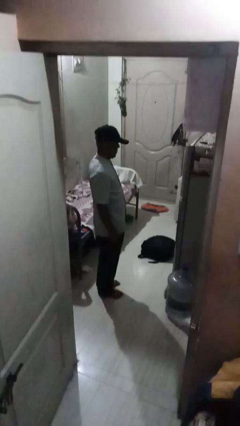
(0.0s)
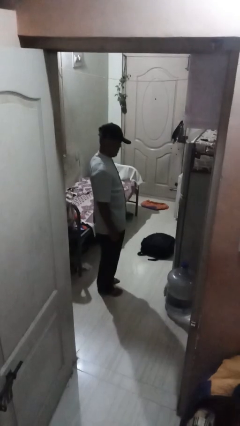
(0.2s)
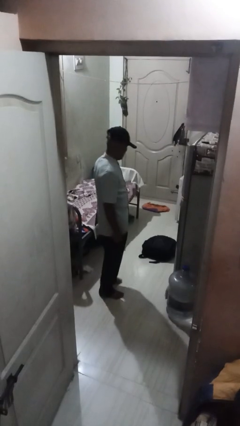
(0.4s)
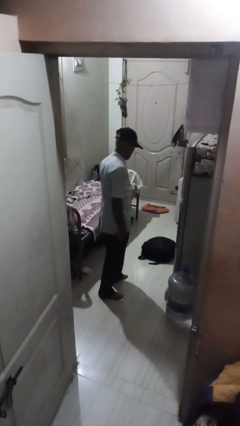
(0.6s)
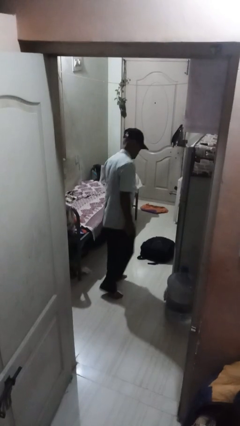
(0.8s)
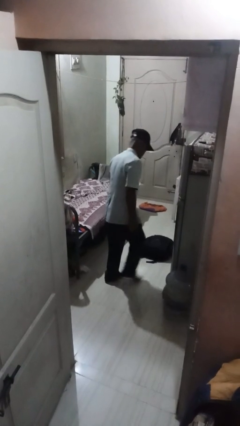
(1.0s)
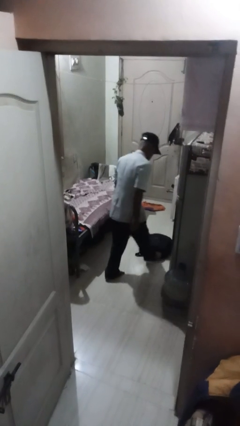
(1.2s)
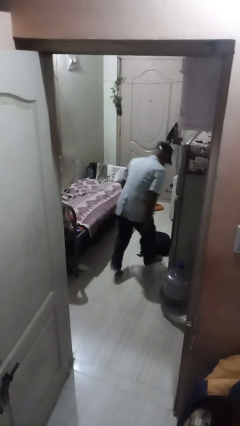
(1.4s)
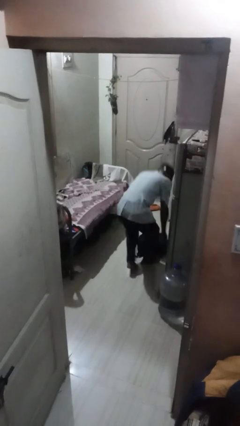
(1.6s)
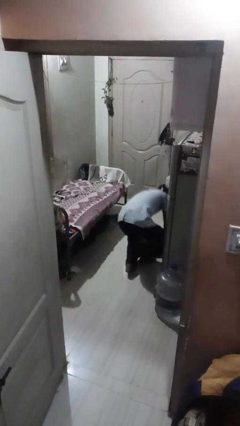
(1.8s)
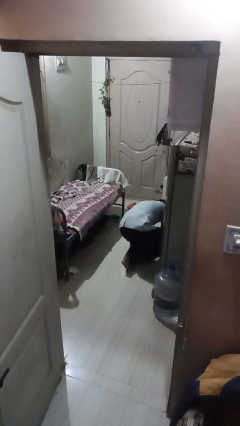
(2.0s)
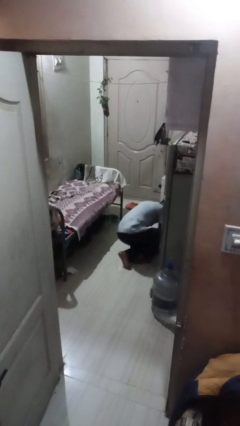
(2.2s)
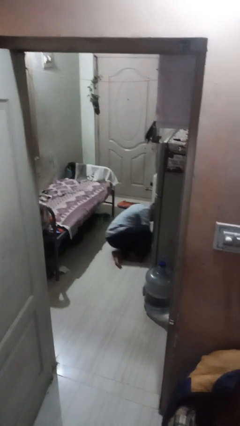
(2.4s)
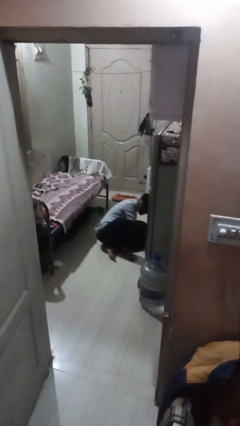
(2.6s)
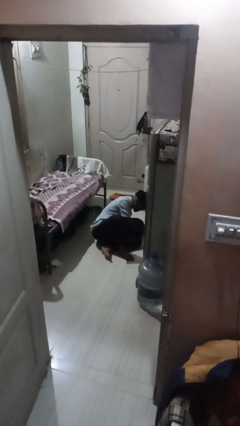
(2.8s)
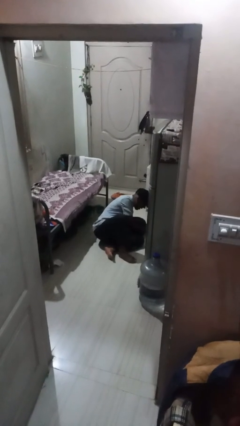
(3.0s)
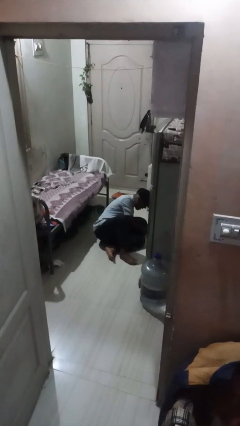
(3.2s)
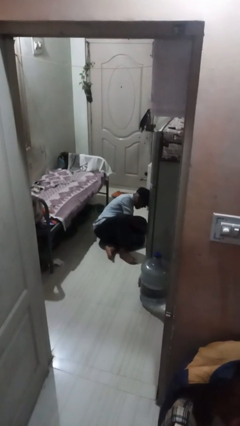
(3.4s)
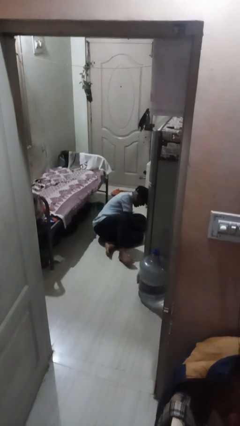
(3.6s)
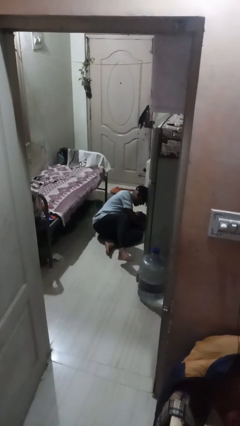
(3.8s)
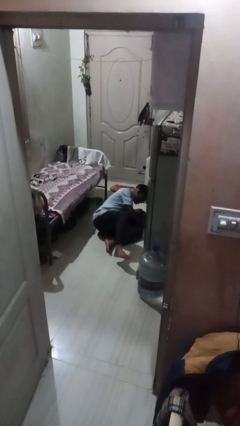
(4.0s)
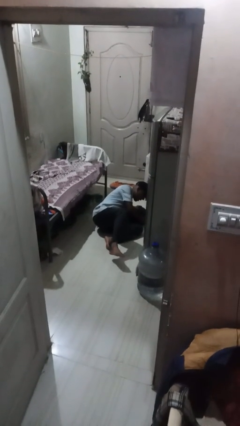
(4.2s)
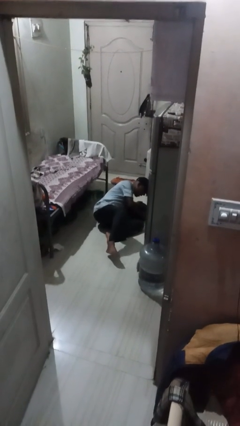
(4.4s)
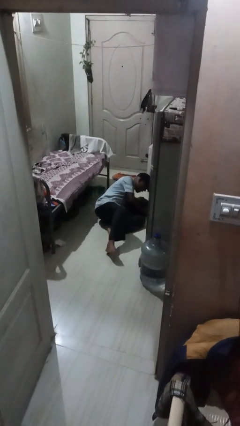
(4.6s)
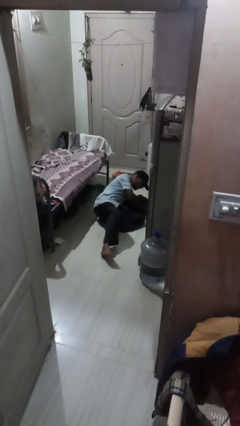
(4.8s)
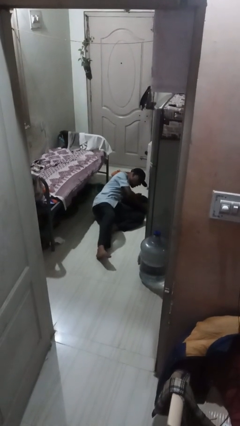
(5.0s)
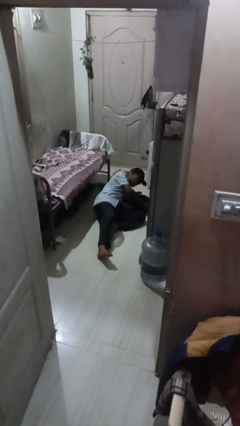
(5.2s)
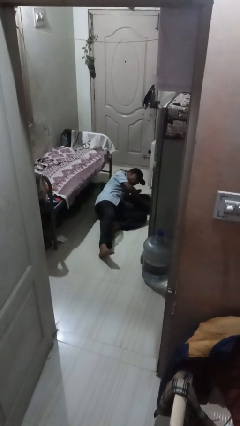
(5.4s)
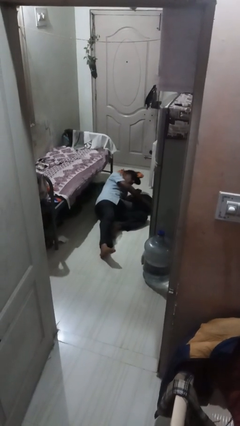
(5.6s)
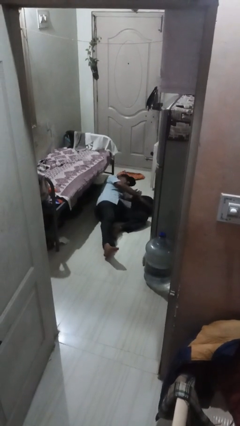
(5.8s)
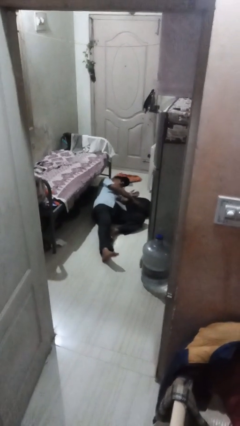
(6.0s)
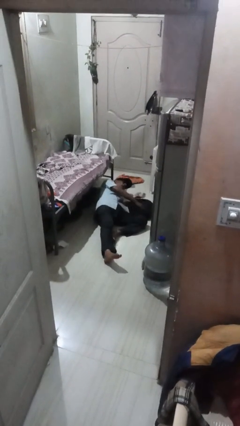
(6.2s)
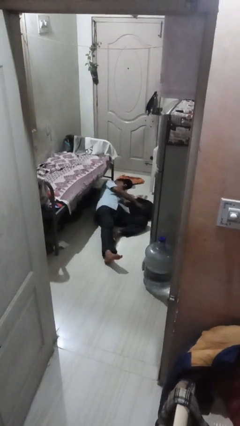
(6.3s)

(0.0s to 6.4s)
person trips on object on floor

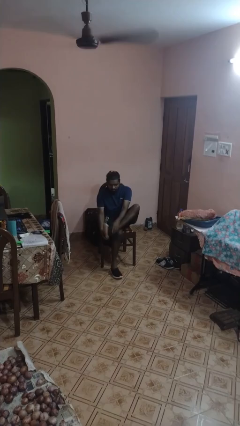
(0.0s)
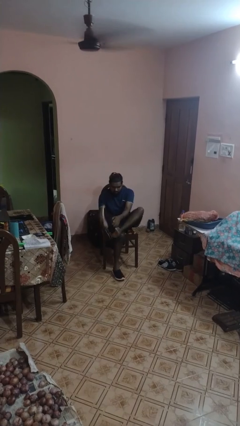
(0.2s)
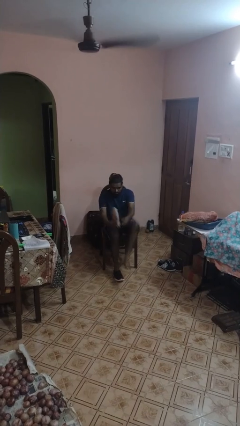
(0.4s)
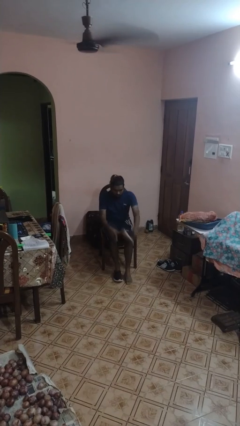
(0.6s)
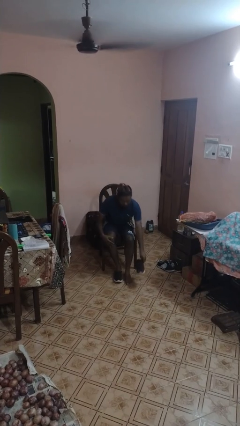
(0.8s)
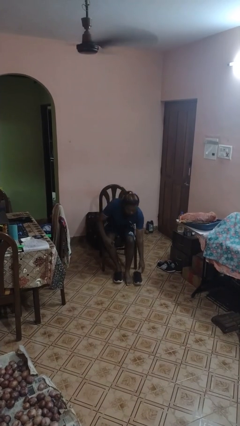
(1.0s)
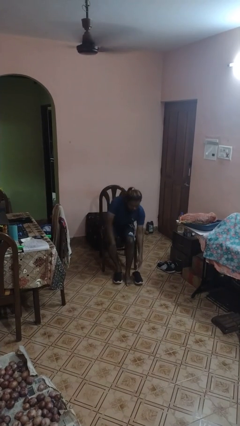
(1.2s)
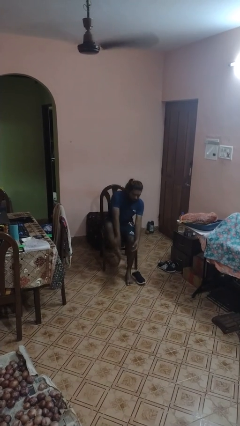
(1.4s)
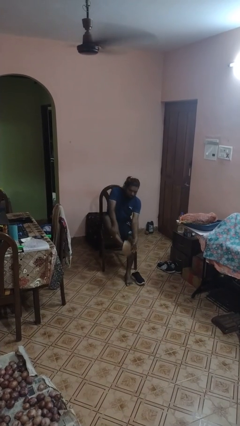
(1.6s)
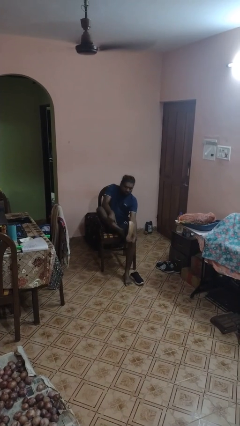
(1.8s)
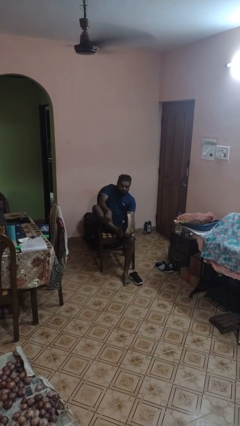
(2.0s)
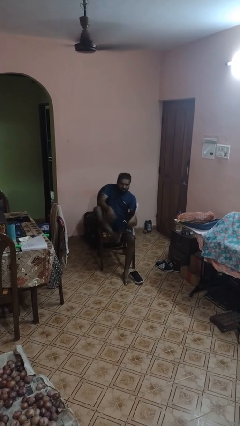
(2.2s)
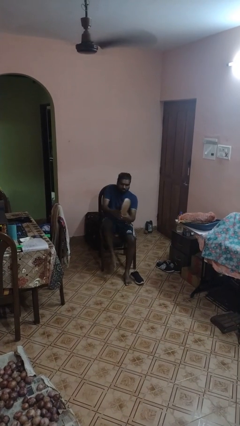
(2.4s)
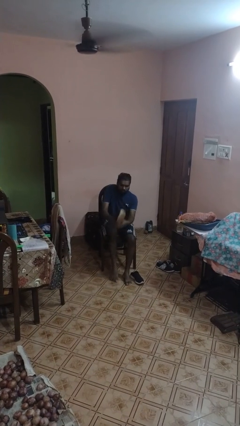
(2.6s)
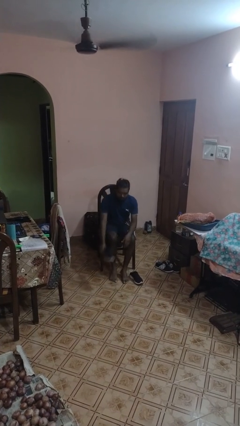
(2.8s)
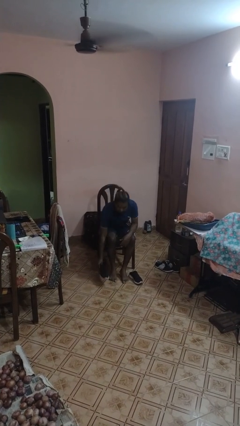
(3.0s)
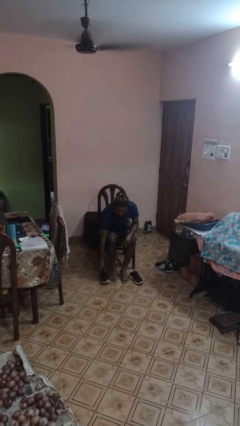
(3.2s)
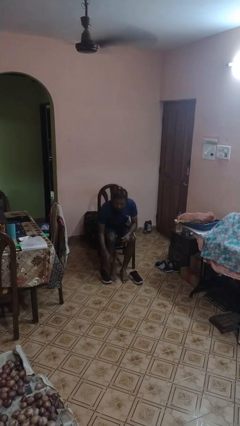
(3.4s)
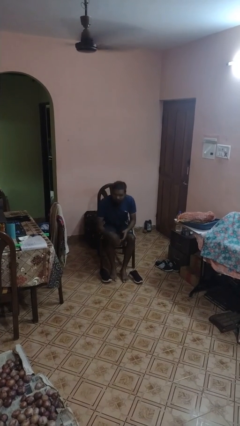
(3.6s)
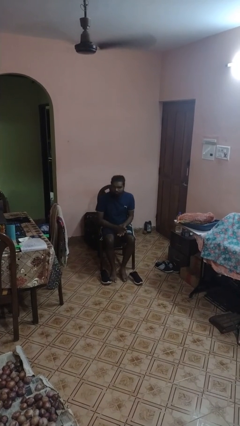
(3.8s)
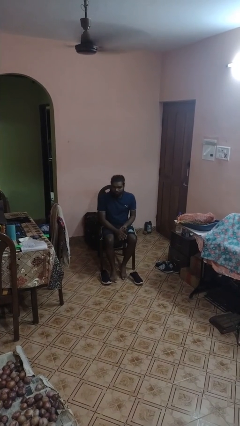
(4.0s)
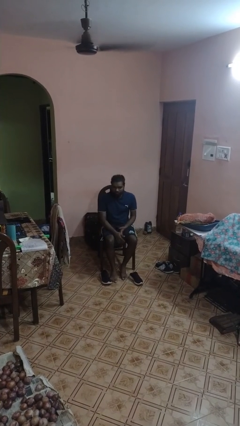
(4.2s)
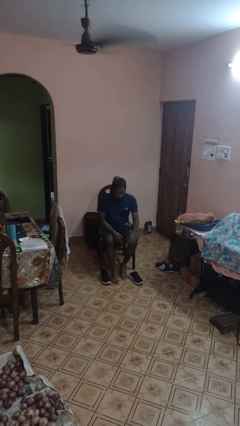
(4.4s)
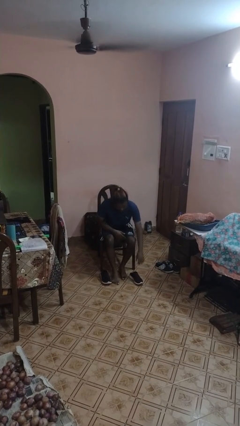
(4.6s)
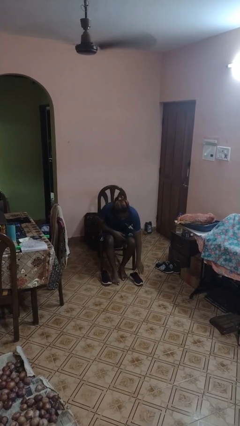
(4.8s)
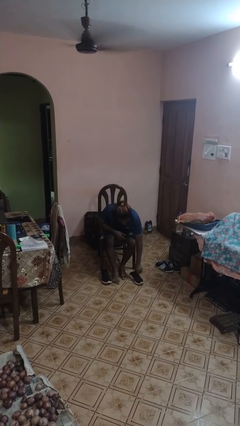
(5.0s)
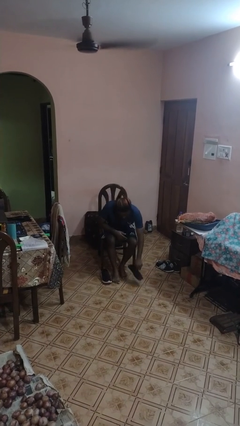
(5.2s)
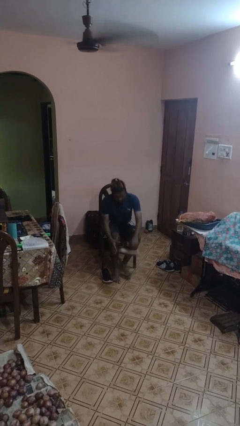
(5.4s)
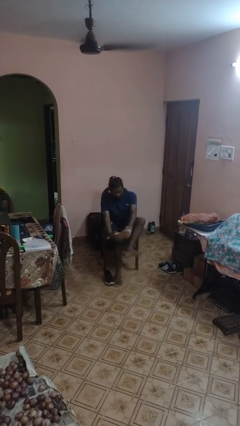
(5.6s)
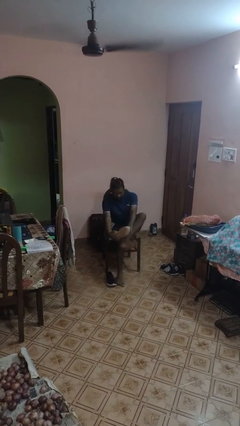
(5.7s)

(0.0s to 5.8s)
person takes off shoes

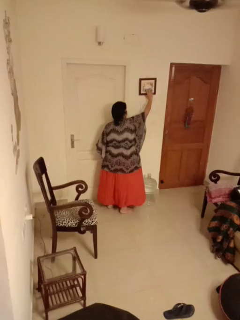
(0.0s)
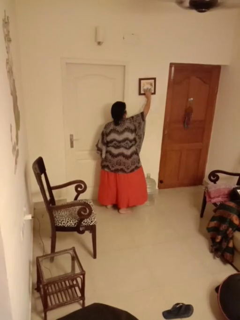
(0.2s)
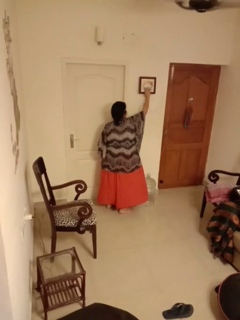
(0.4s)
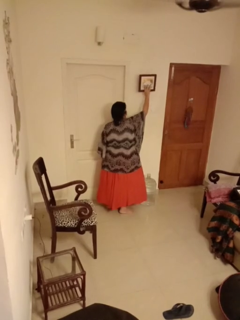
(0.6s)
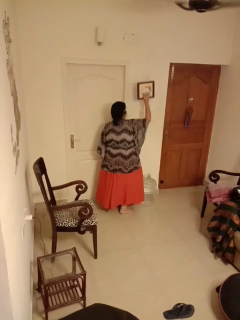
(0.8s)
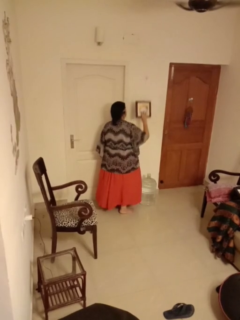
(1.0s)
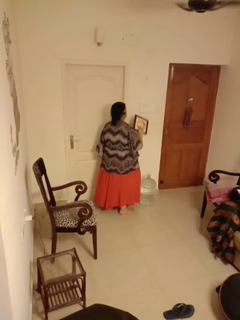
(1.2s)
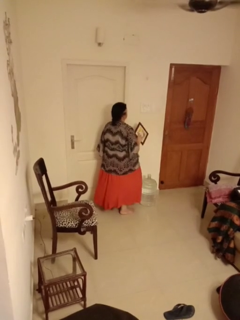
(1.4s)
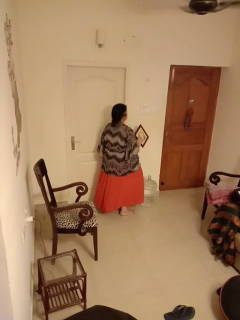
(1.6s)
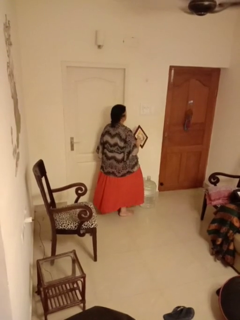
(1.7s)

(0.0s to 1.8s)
person takes down picture frame

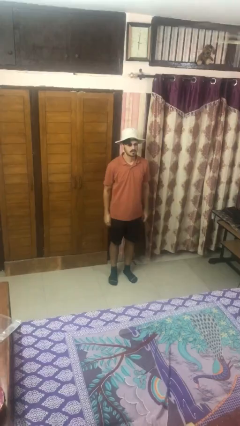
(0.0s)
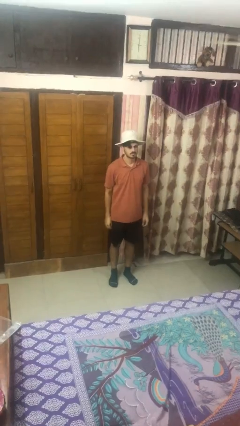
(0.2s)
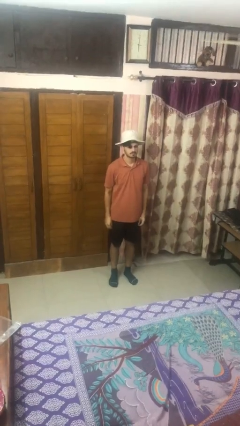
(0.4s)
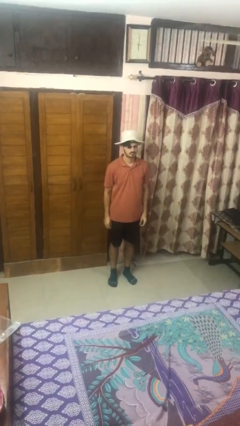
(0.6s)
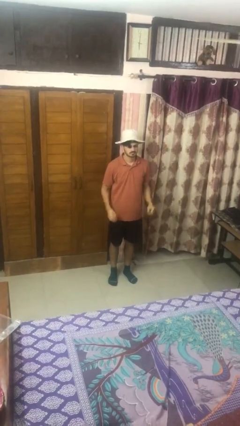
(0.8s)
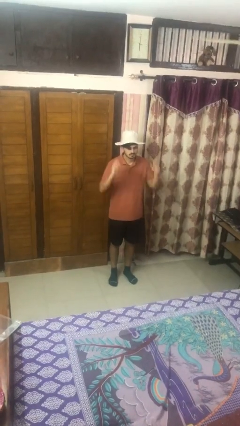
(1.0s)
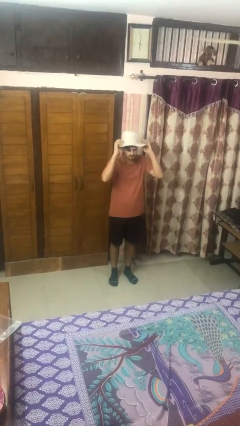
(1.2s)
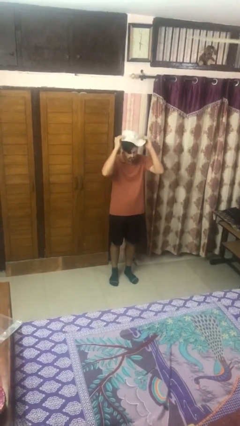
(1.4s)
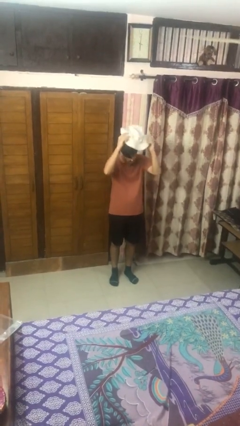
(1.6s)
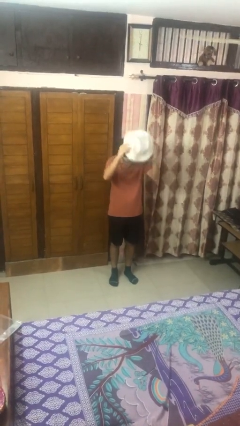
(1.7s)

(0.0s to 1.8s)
person takes off hat

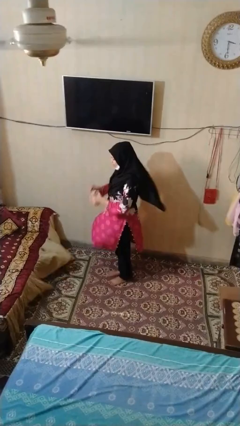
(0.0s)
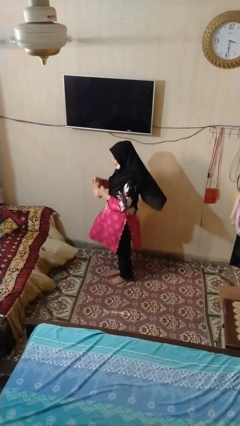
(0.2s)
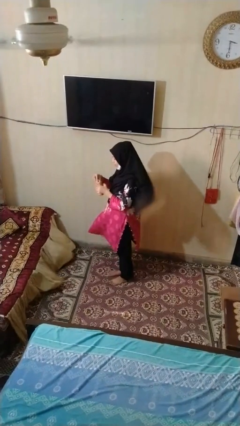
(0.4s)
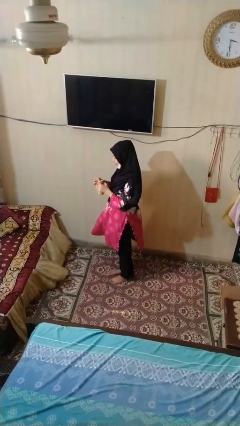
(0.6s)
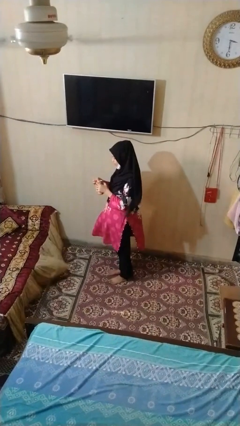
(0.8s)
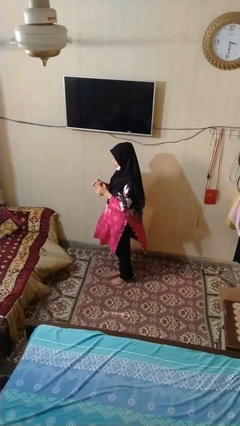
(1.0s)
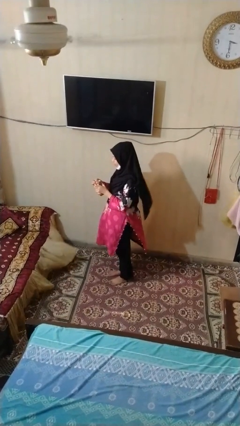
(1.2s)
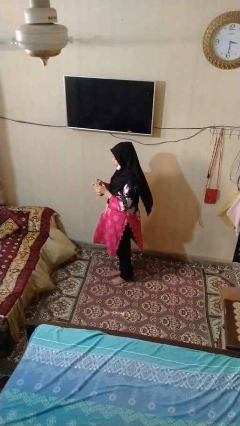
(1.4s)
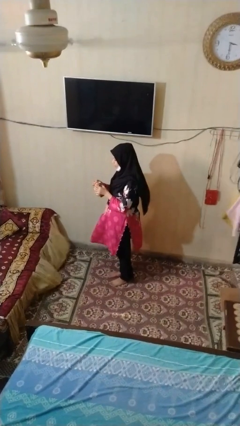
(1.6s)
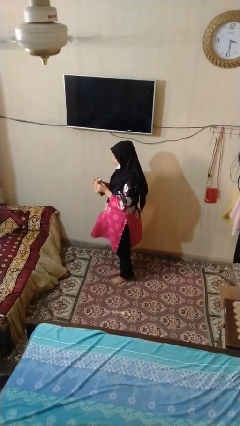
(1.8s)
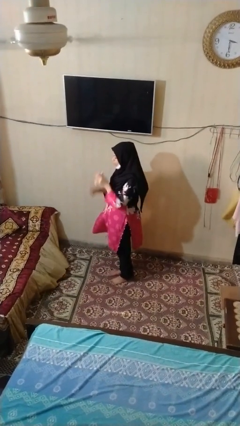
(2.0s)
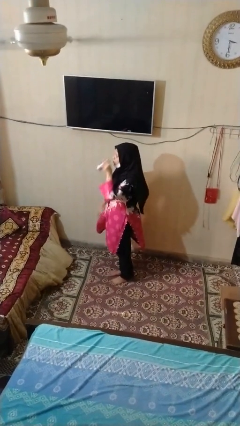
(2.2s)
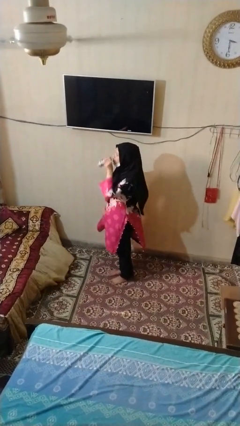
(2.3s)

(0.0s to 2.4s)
person opens beverage can
